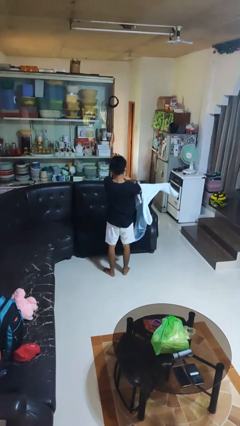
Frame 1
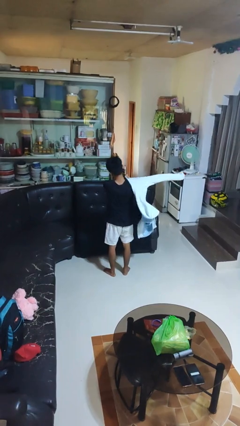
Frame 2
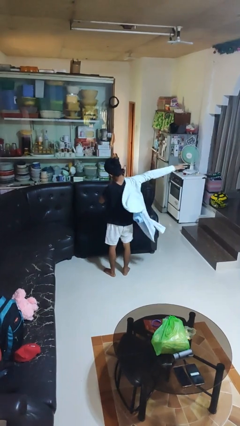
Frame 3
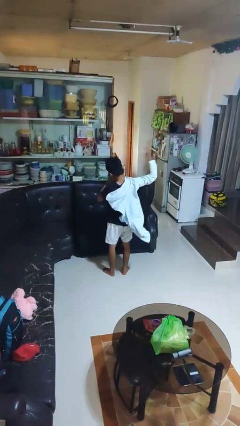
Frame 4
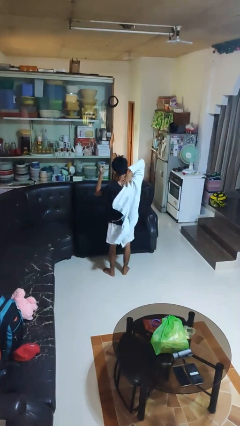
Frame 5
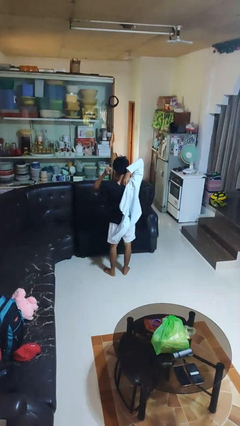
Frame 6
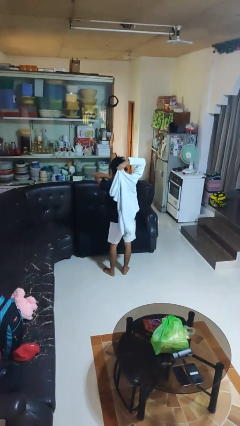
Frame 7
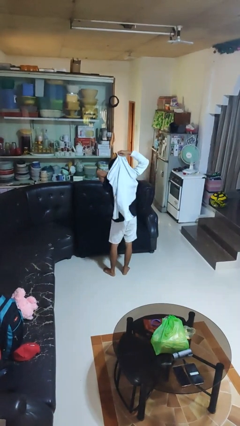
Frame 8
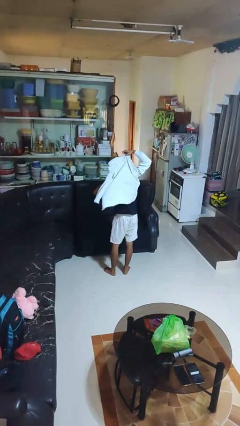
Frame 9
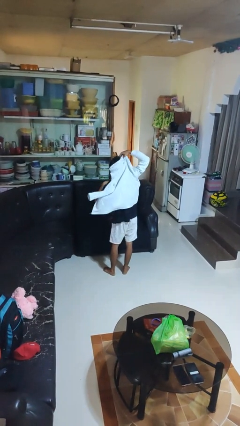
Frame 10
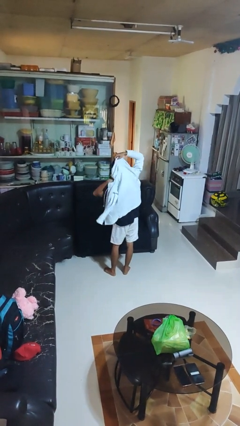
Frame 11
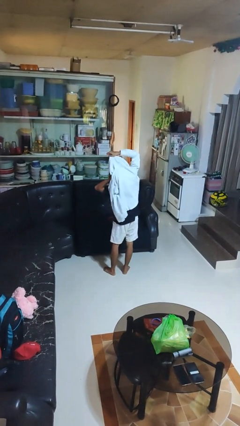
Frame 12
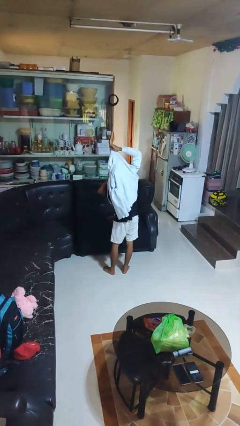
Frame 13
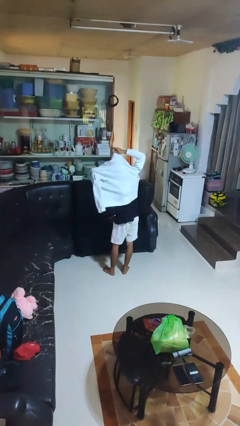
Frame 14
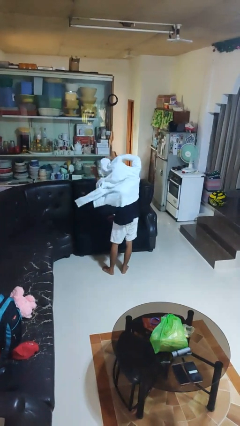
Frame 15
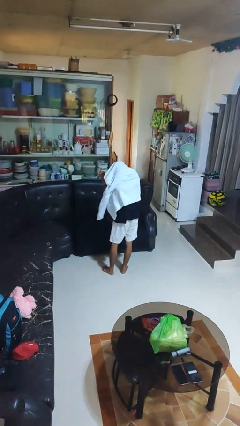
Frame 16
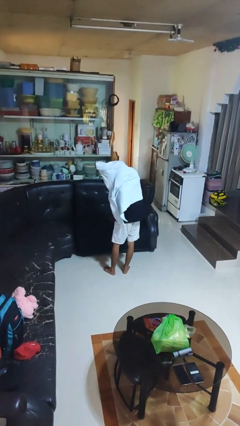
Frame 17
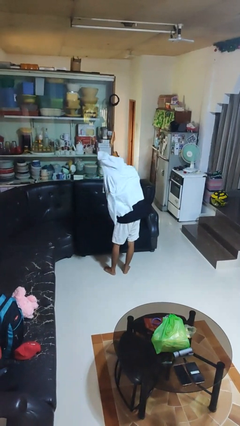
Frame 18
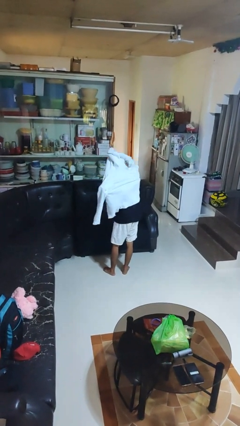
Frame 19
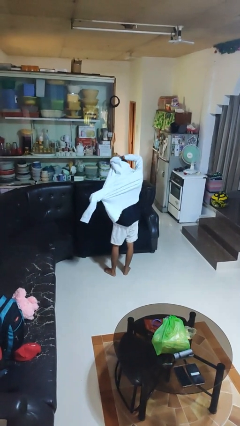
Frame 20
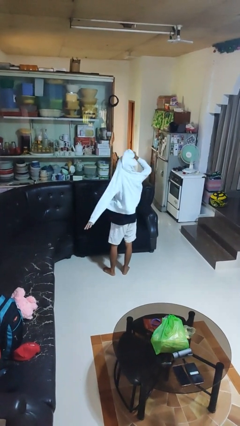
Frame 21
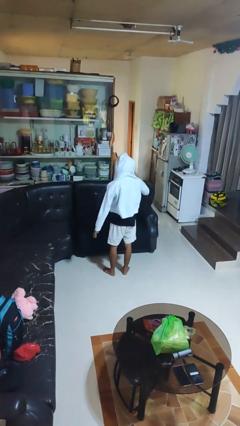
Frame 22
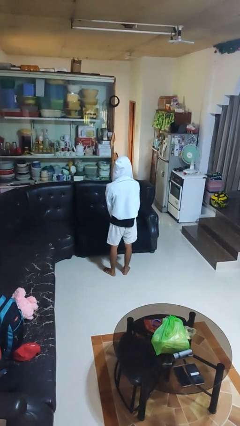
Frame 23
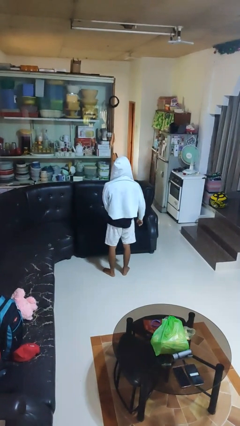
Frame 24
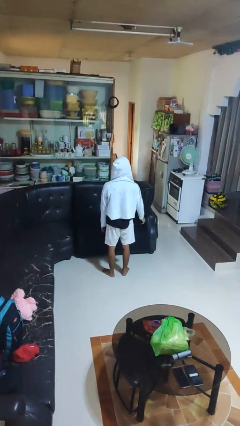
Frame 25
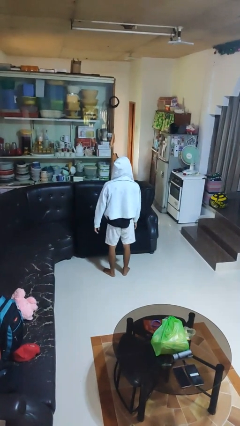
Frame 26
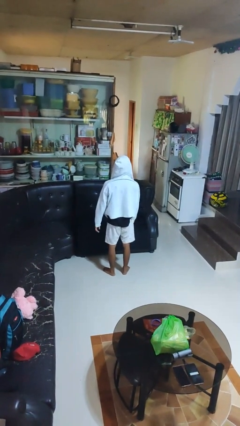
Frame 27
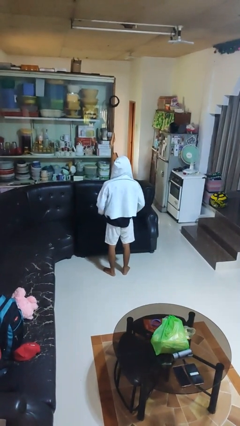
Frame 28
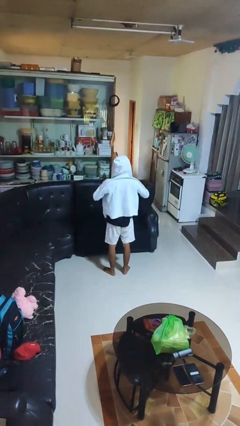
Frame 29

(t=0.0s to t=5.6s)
person puts on hoodie

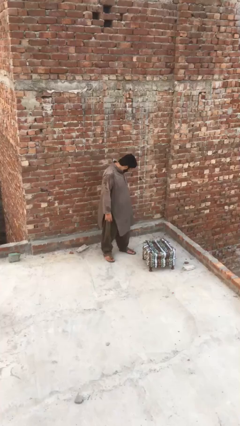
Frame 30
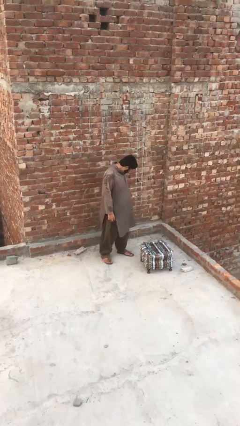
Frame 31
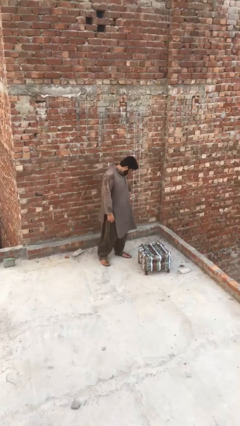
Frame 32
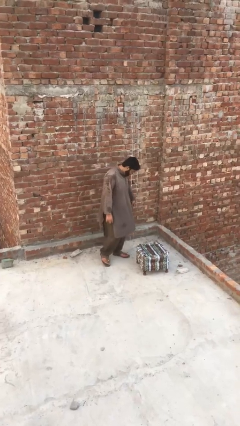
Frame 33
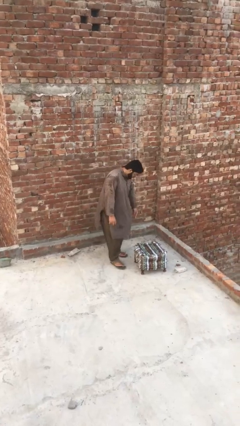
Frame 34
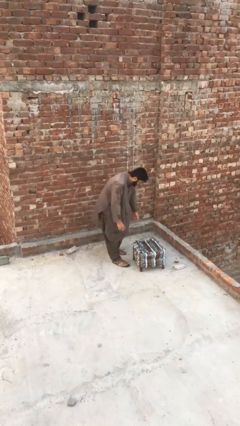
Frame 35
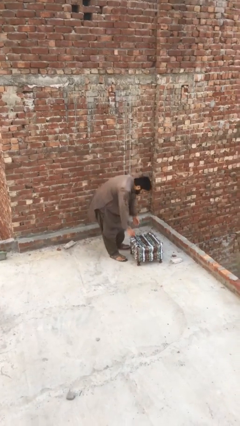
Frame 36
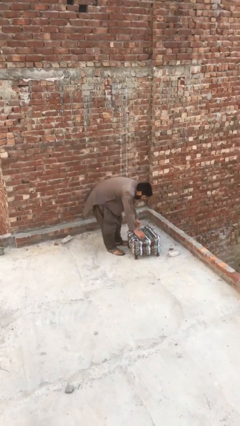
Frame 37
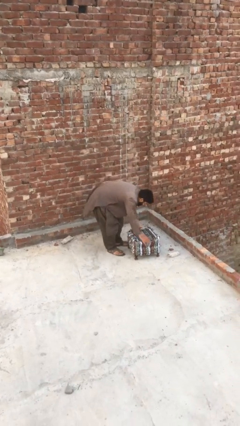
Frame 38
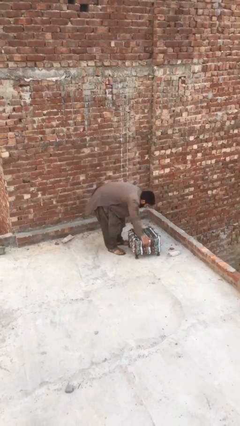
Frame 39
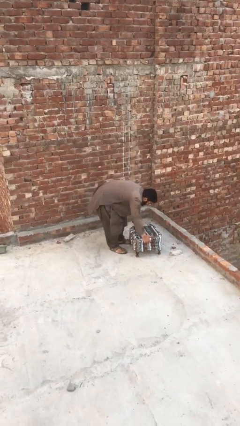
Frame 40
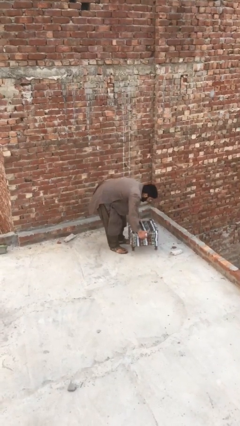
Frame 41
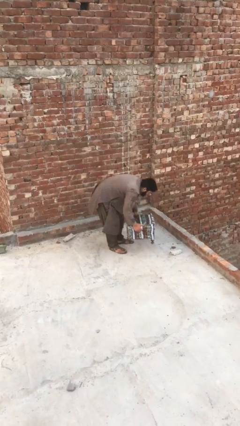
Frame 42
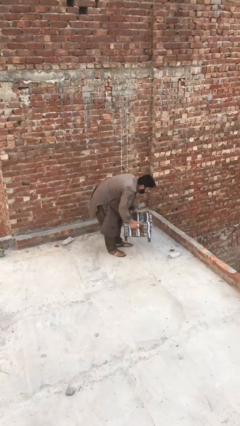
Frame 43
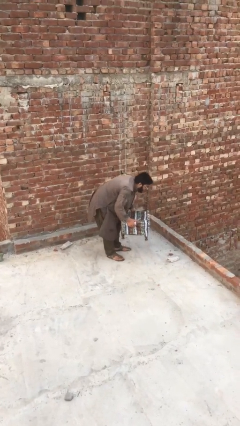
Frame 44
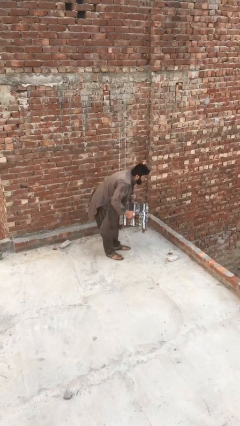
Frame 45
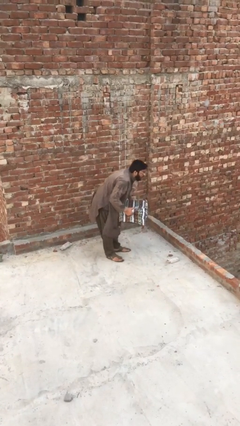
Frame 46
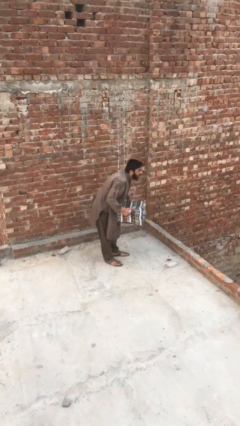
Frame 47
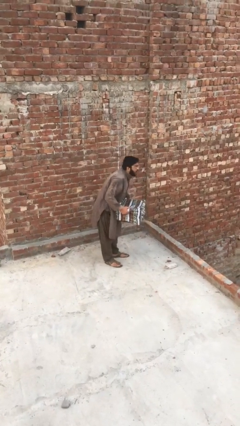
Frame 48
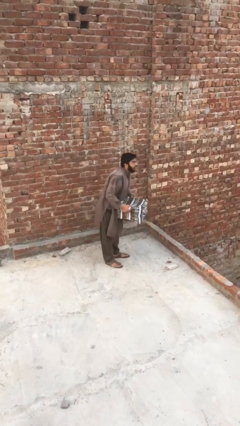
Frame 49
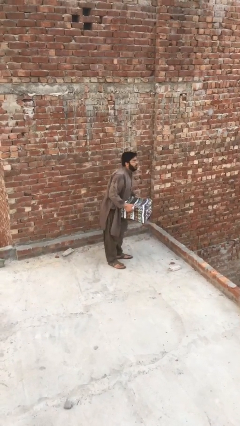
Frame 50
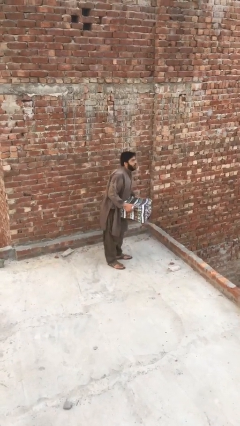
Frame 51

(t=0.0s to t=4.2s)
person picks up object from floor

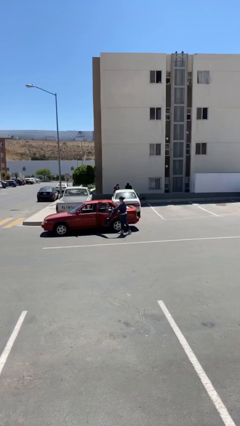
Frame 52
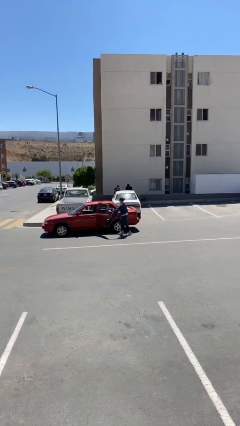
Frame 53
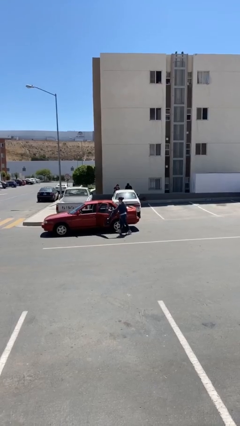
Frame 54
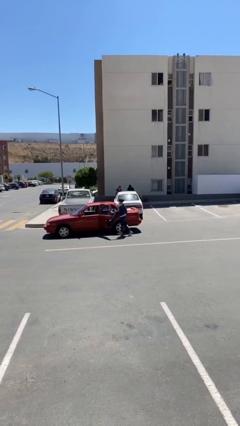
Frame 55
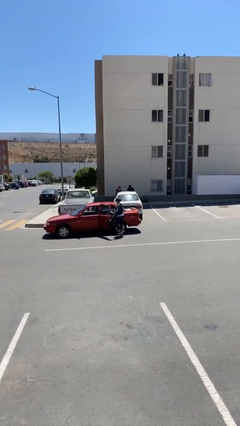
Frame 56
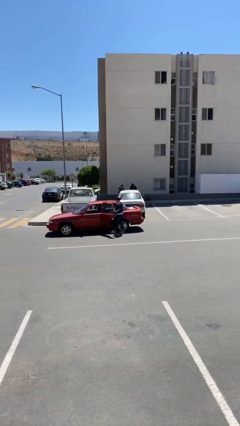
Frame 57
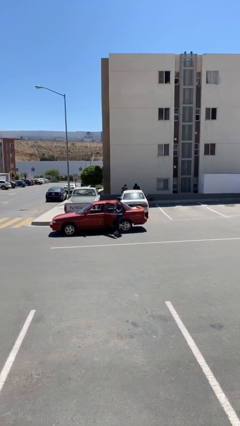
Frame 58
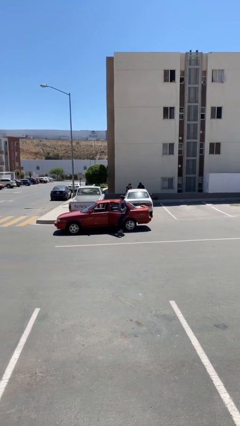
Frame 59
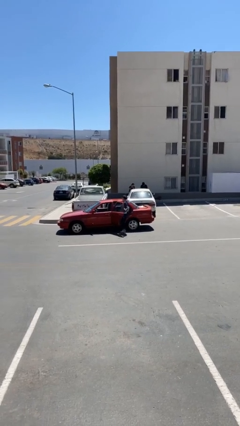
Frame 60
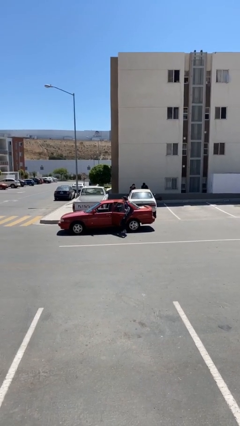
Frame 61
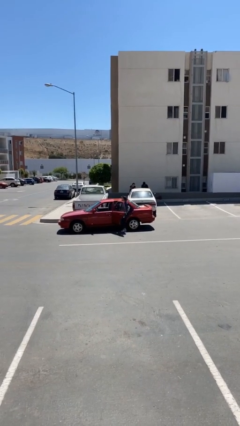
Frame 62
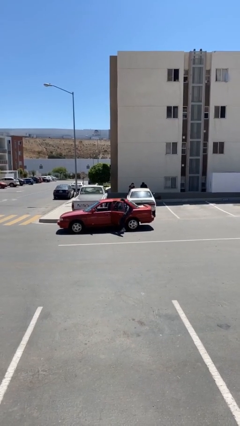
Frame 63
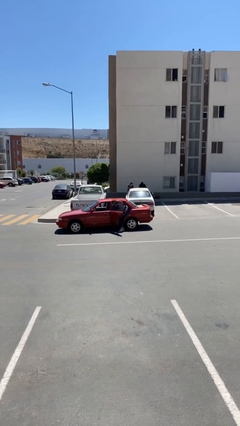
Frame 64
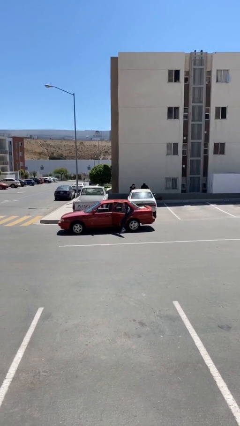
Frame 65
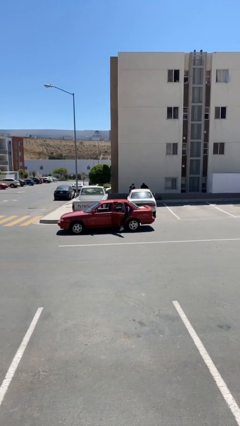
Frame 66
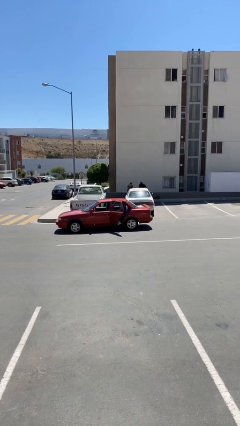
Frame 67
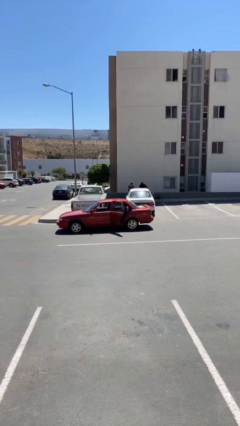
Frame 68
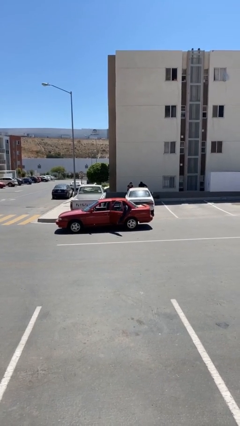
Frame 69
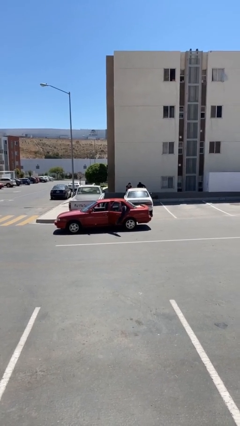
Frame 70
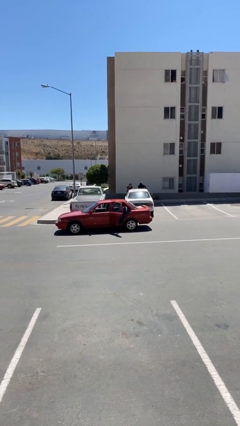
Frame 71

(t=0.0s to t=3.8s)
person enters car

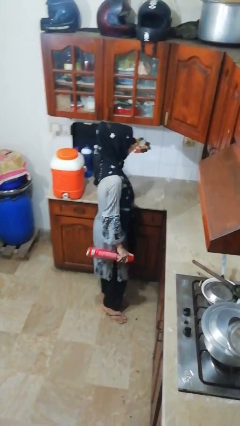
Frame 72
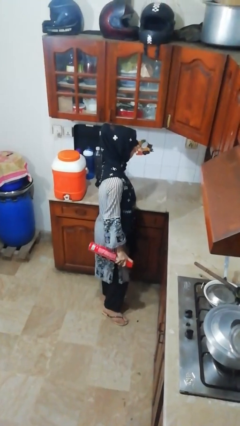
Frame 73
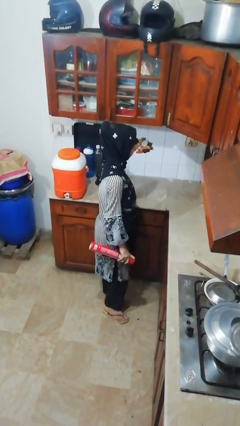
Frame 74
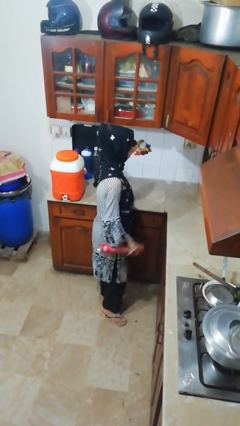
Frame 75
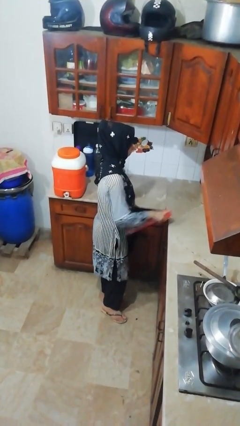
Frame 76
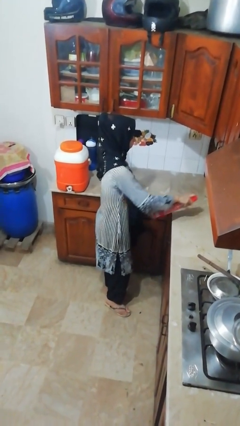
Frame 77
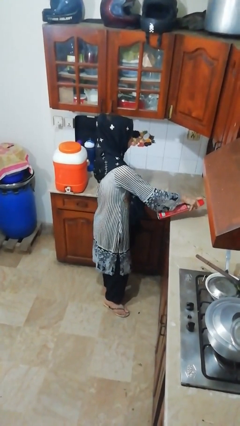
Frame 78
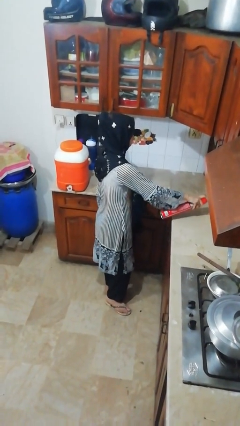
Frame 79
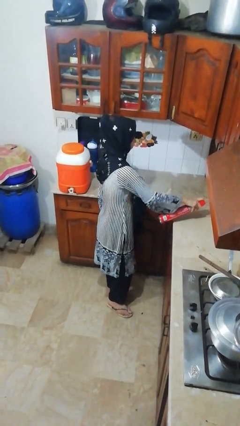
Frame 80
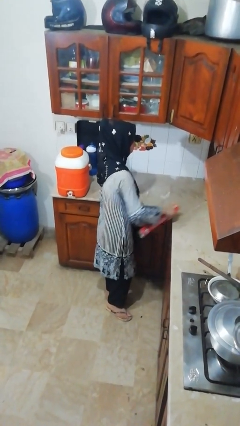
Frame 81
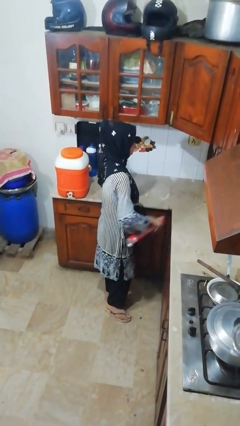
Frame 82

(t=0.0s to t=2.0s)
person sprays from bottle

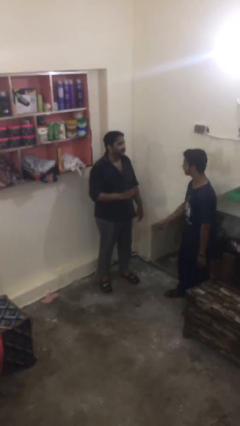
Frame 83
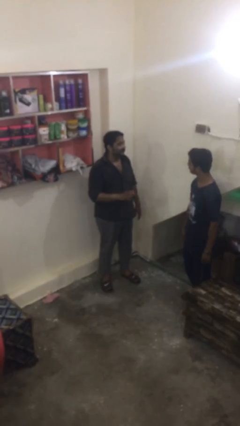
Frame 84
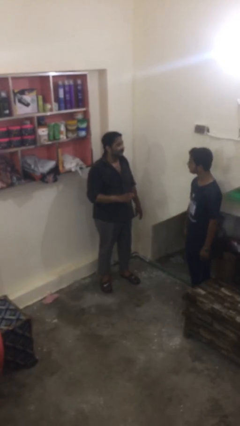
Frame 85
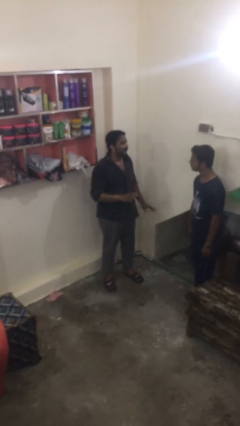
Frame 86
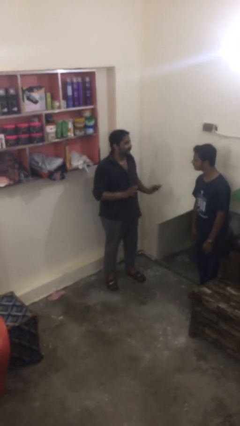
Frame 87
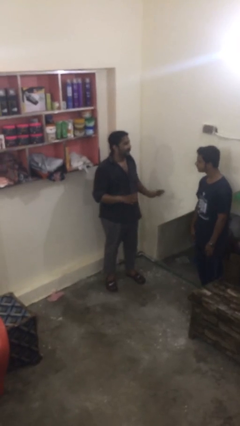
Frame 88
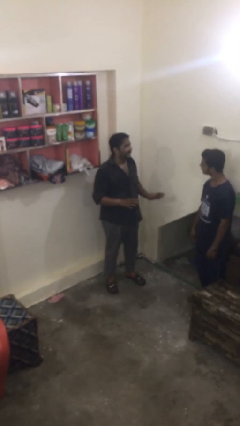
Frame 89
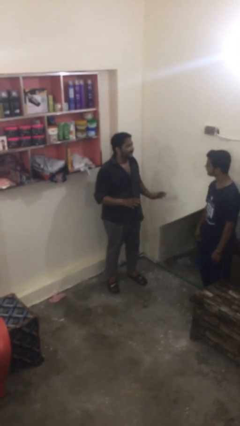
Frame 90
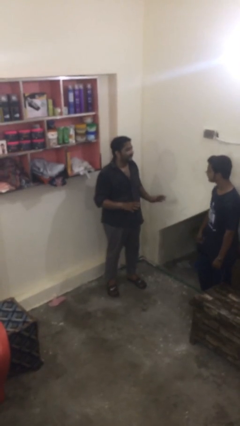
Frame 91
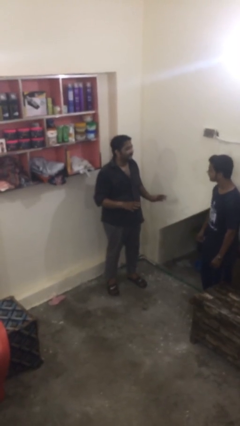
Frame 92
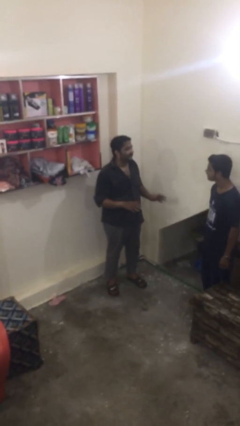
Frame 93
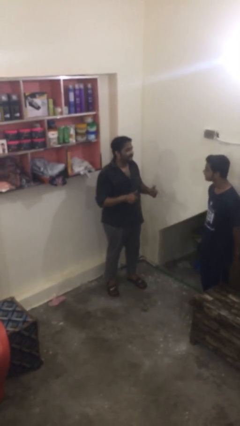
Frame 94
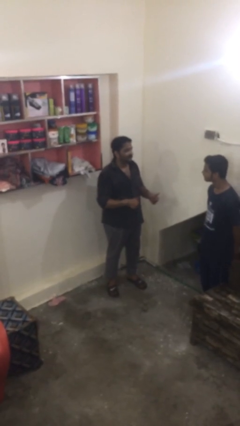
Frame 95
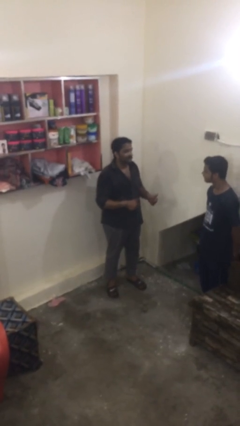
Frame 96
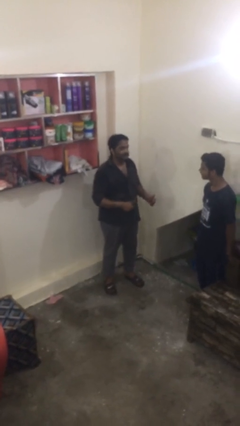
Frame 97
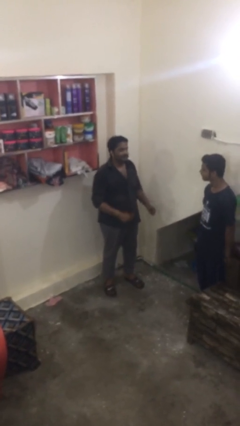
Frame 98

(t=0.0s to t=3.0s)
person talks to person
